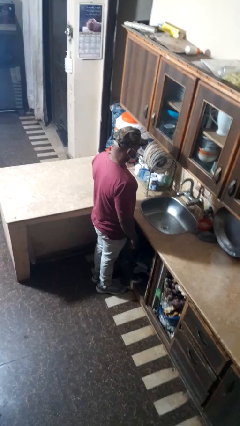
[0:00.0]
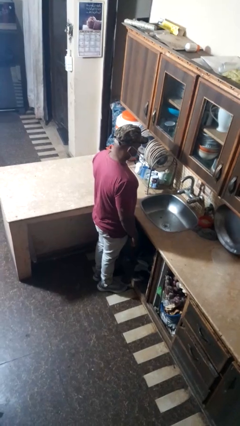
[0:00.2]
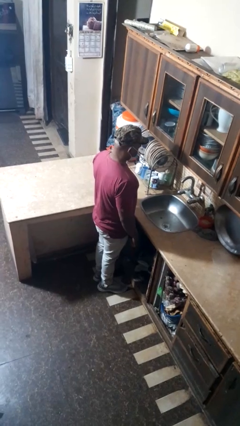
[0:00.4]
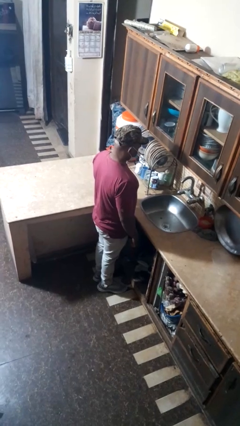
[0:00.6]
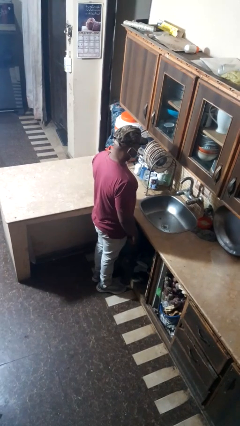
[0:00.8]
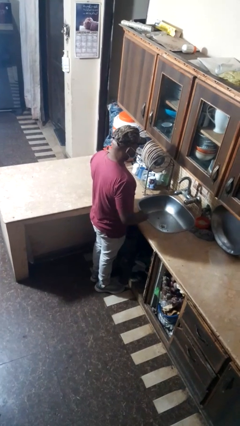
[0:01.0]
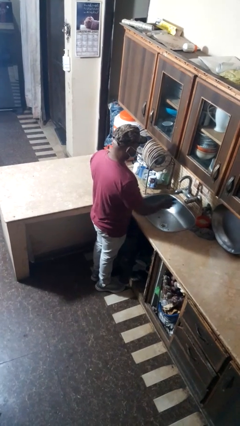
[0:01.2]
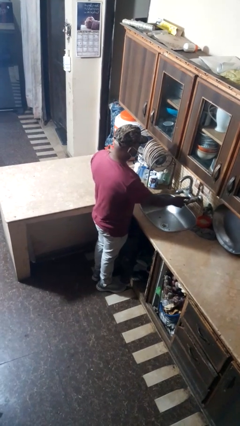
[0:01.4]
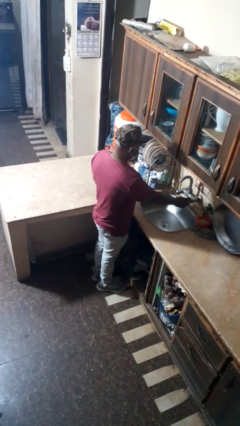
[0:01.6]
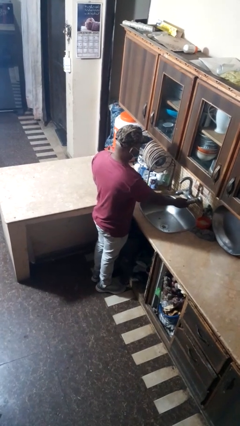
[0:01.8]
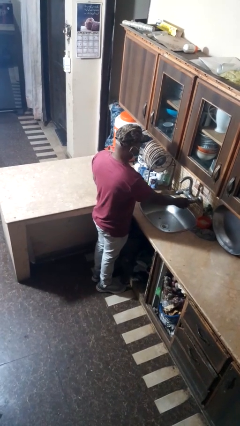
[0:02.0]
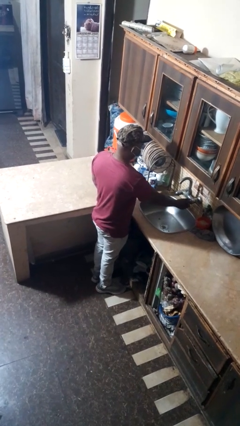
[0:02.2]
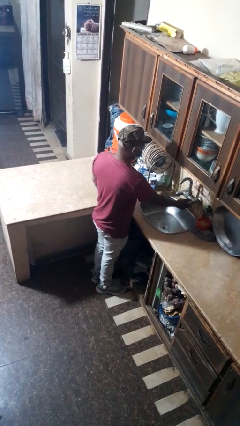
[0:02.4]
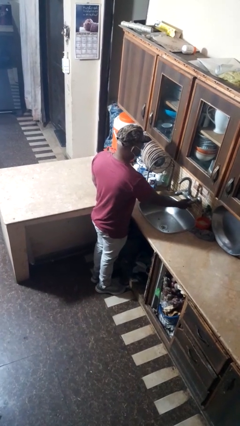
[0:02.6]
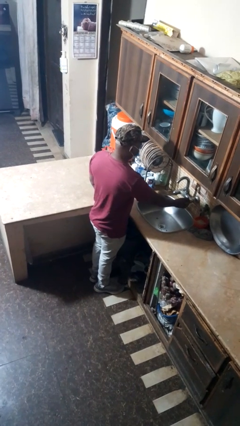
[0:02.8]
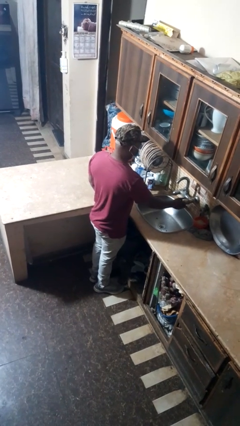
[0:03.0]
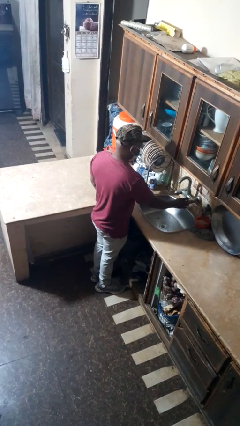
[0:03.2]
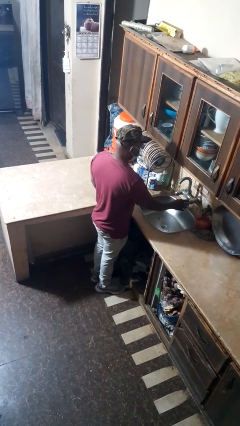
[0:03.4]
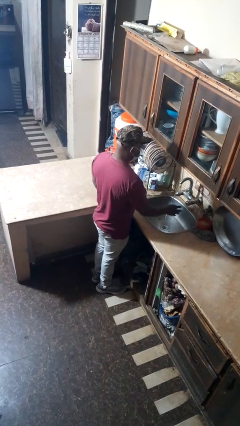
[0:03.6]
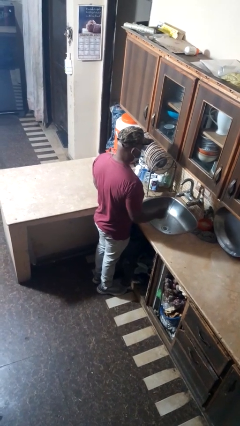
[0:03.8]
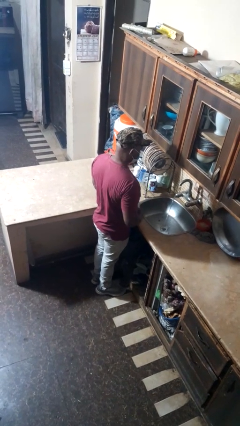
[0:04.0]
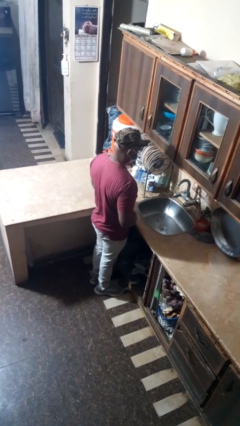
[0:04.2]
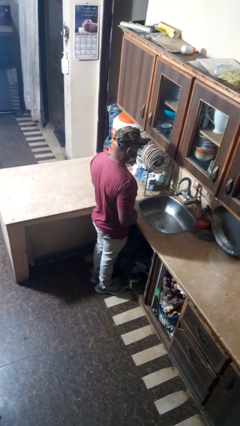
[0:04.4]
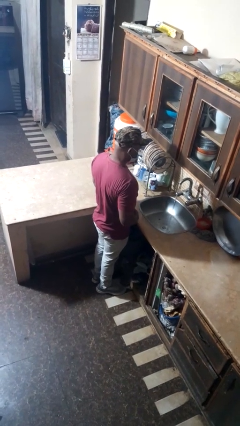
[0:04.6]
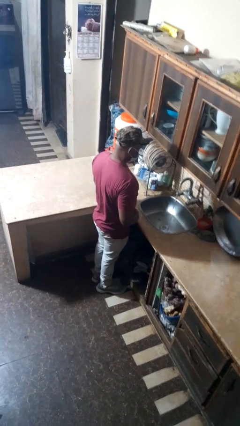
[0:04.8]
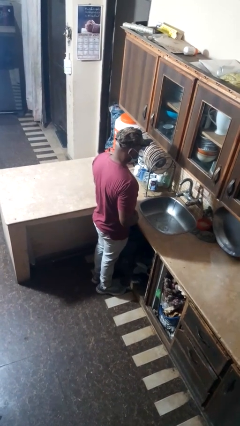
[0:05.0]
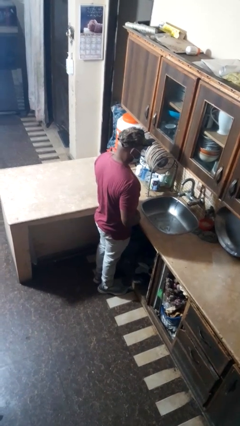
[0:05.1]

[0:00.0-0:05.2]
person turns on faucet

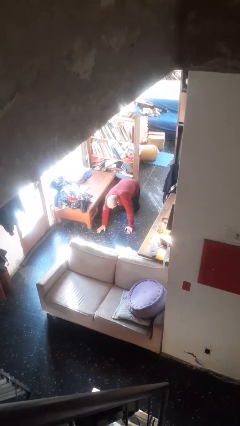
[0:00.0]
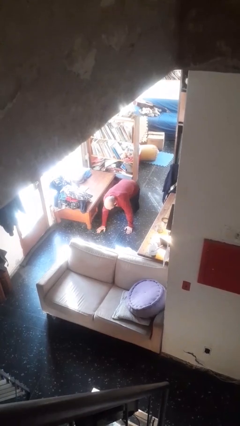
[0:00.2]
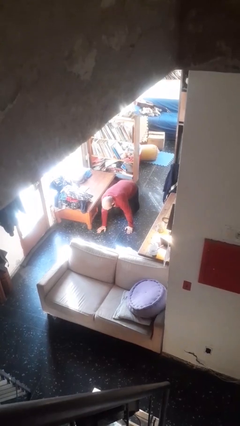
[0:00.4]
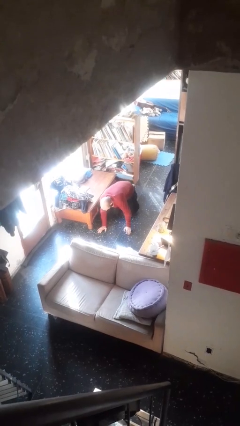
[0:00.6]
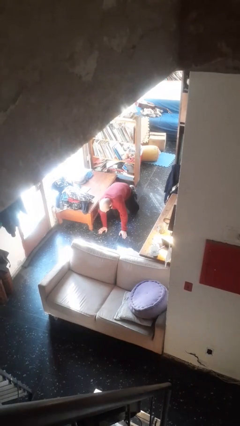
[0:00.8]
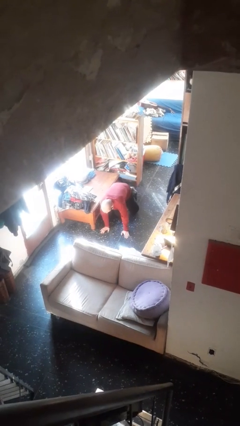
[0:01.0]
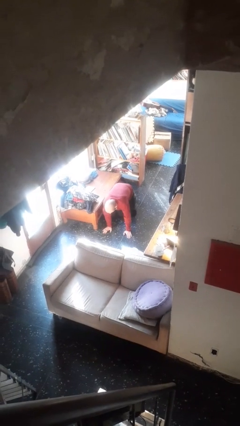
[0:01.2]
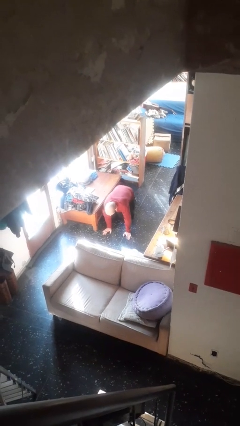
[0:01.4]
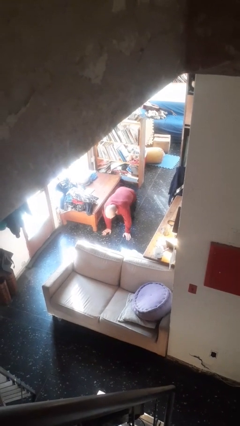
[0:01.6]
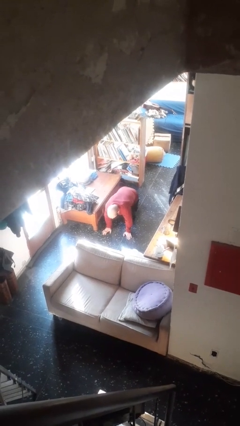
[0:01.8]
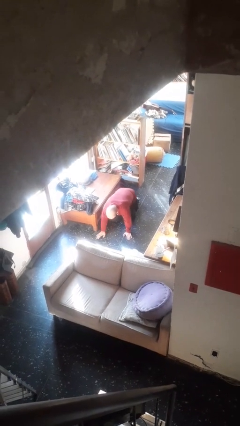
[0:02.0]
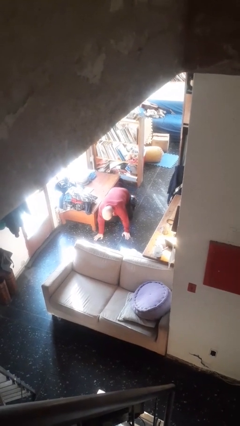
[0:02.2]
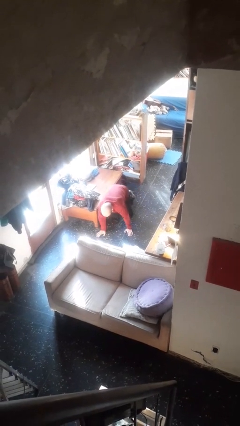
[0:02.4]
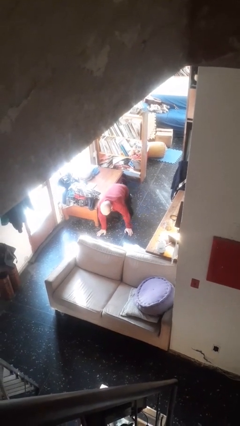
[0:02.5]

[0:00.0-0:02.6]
person crawls

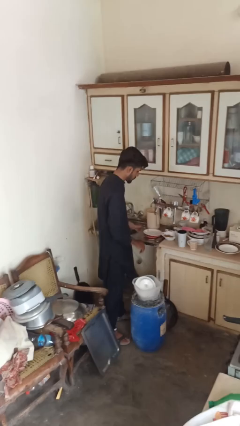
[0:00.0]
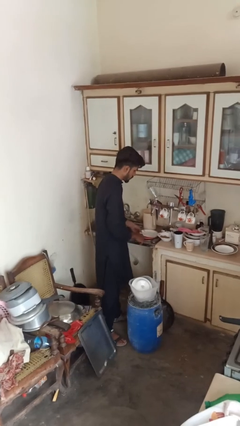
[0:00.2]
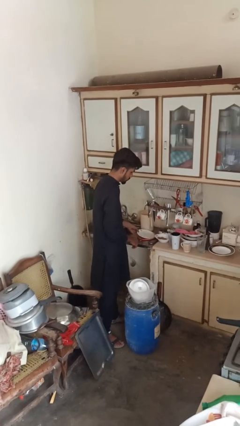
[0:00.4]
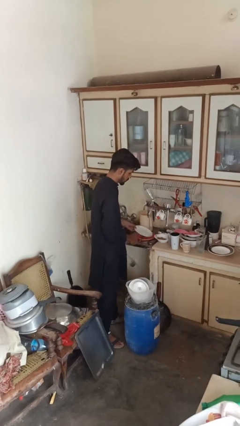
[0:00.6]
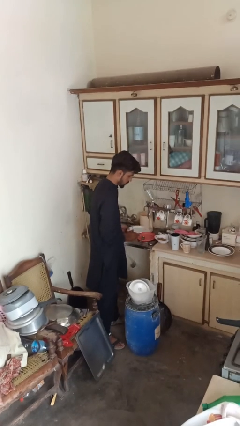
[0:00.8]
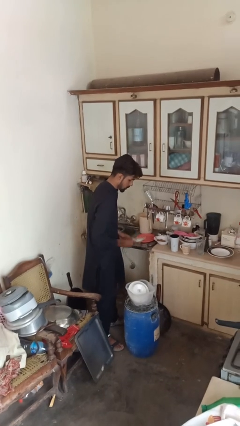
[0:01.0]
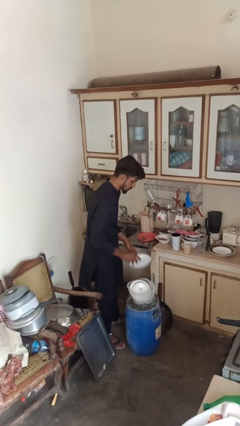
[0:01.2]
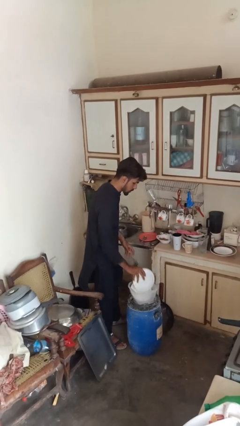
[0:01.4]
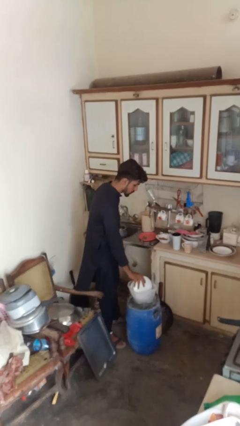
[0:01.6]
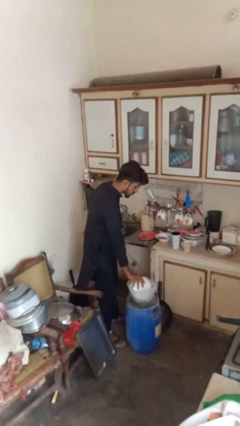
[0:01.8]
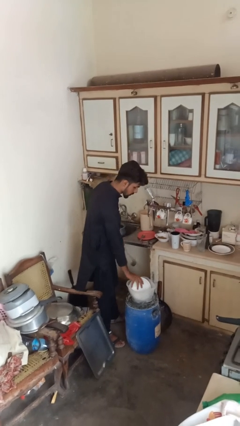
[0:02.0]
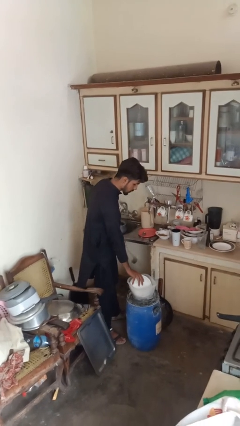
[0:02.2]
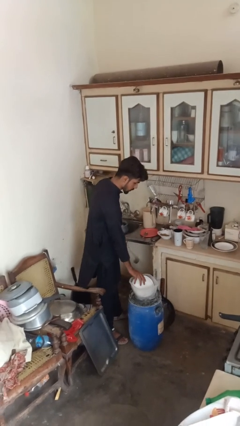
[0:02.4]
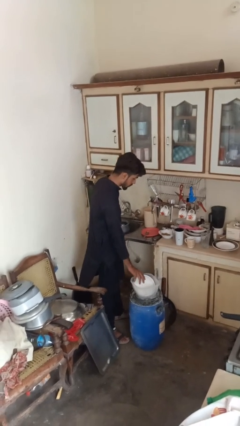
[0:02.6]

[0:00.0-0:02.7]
person loads dishwasher

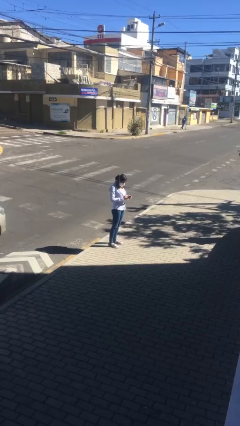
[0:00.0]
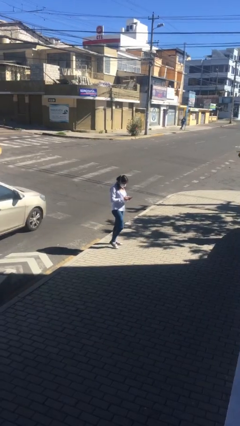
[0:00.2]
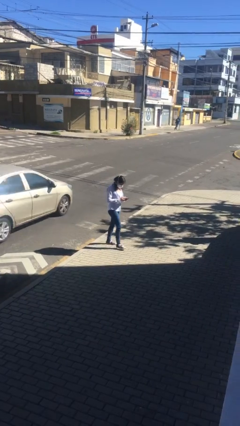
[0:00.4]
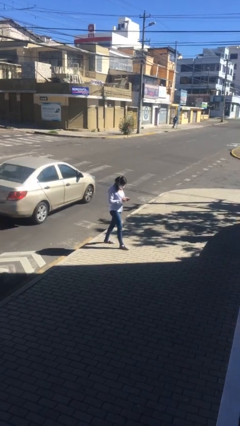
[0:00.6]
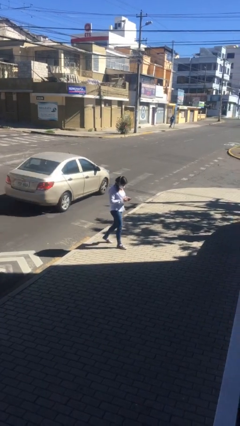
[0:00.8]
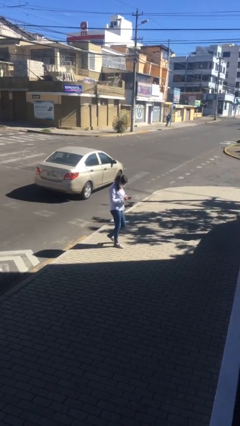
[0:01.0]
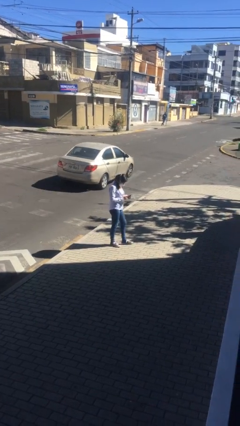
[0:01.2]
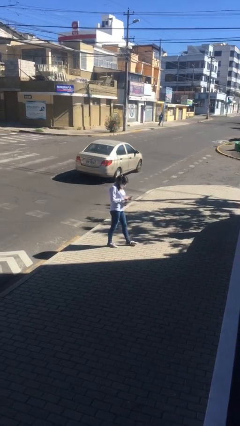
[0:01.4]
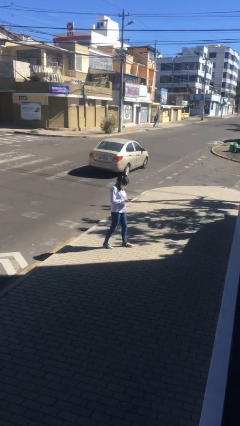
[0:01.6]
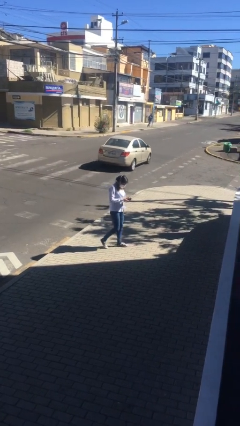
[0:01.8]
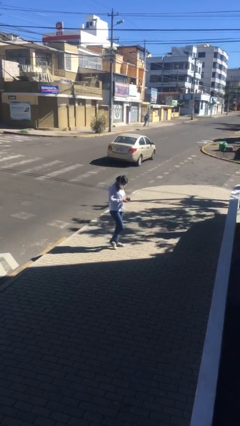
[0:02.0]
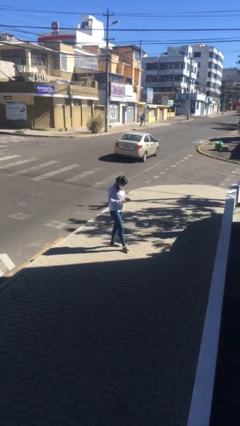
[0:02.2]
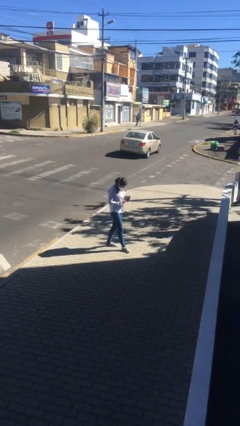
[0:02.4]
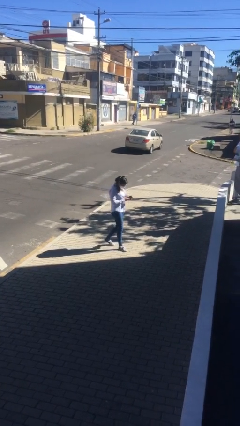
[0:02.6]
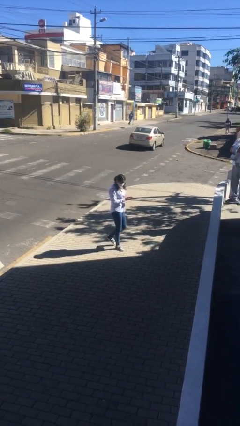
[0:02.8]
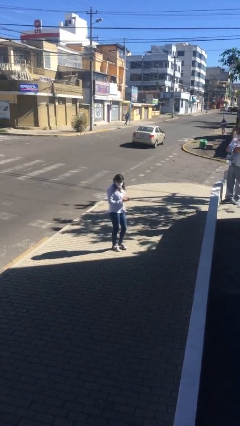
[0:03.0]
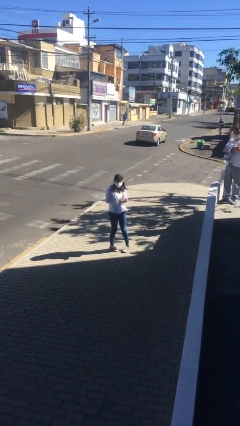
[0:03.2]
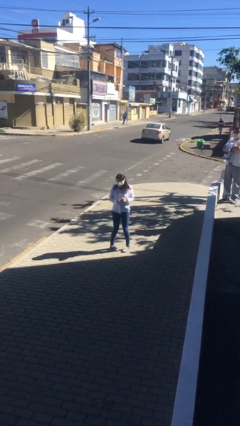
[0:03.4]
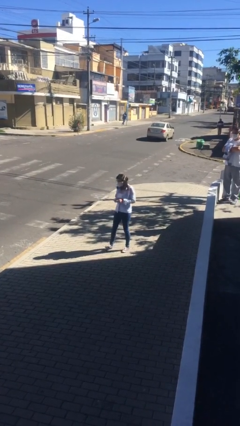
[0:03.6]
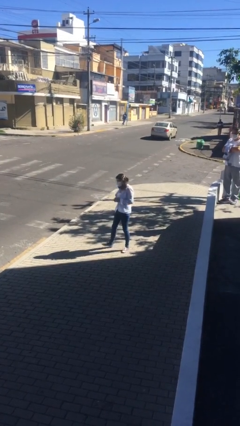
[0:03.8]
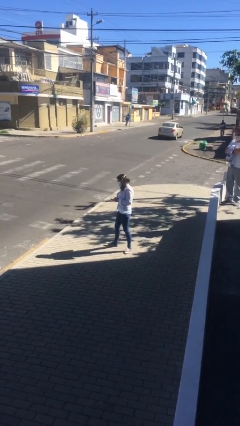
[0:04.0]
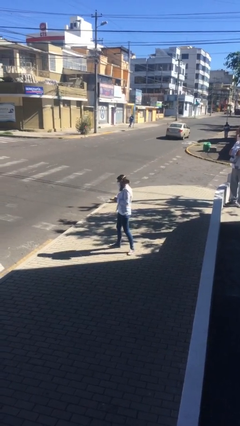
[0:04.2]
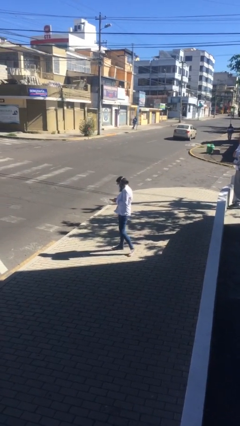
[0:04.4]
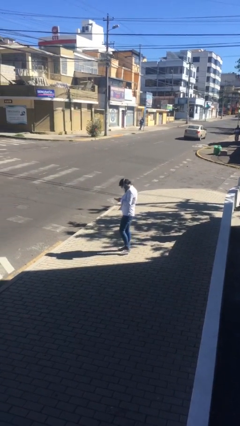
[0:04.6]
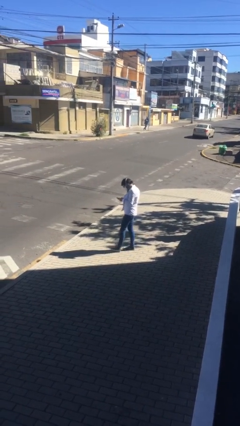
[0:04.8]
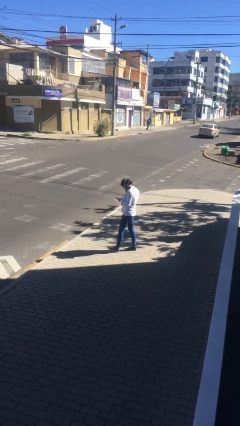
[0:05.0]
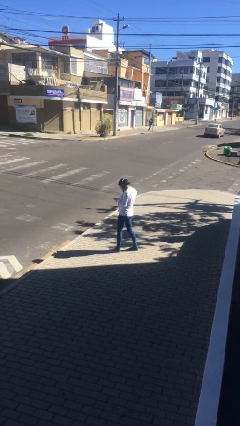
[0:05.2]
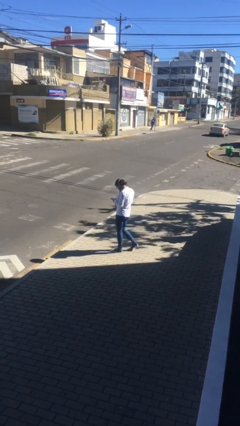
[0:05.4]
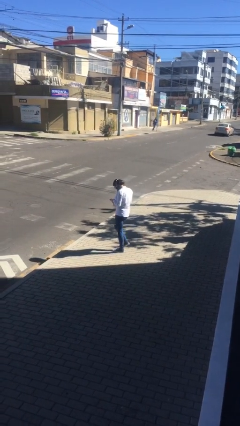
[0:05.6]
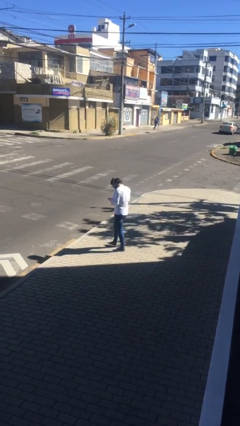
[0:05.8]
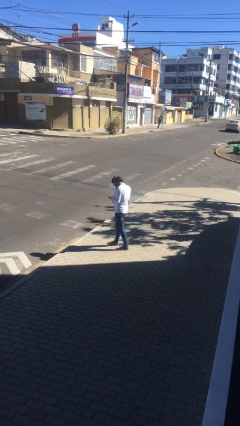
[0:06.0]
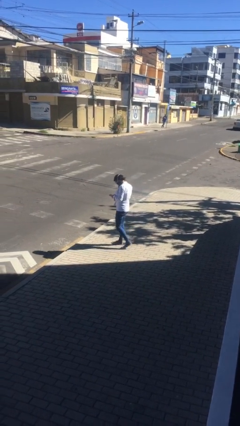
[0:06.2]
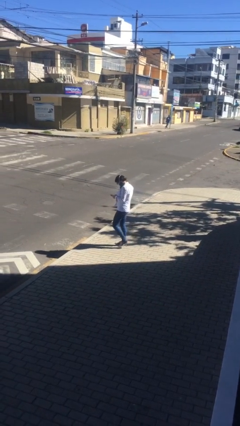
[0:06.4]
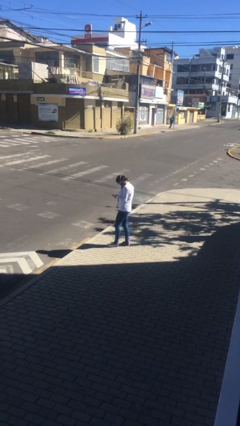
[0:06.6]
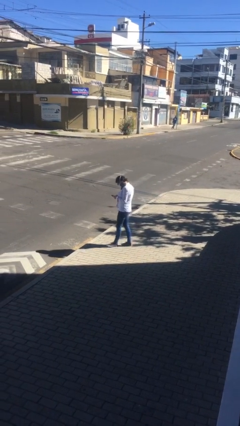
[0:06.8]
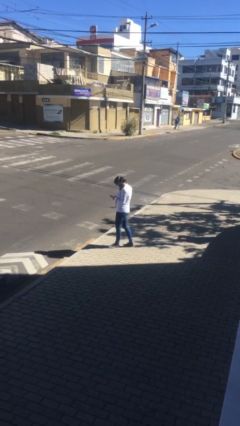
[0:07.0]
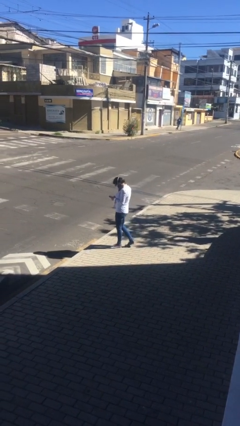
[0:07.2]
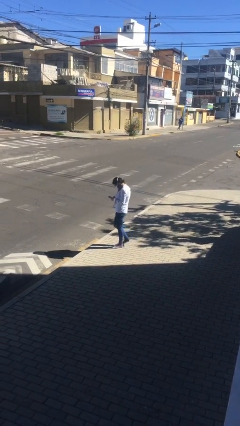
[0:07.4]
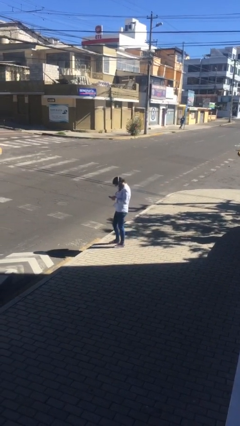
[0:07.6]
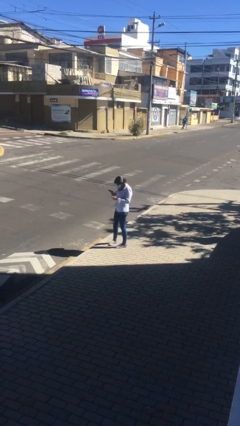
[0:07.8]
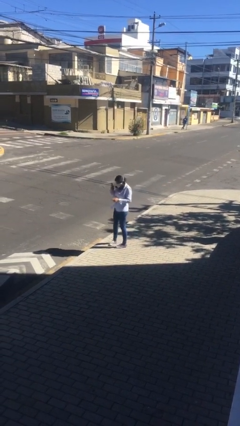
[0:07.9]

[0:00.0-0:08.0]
person texts on phone
